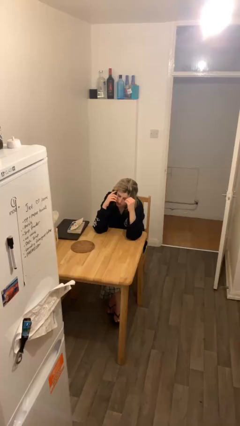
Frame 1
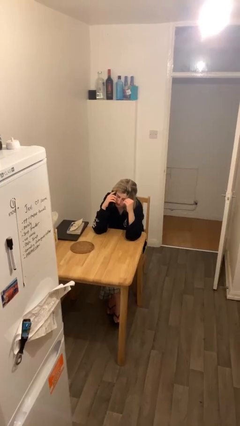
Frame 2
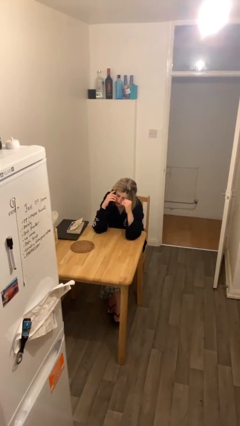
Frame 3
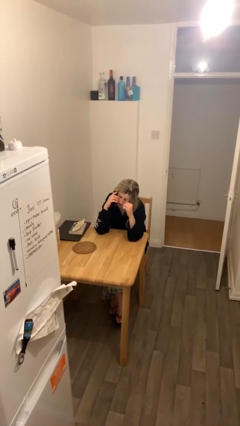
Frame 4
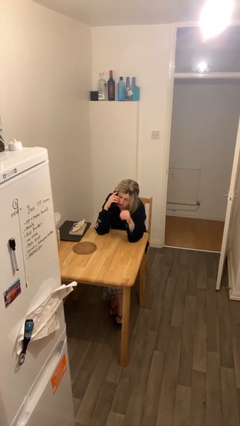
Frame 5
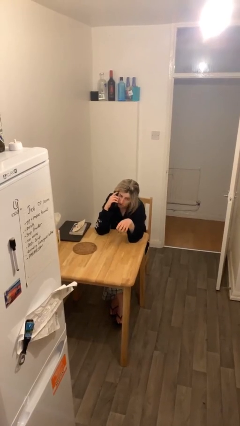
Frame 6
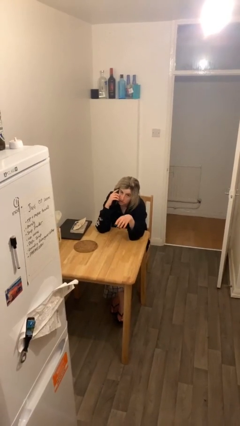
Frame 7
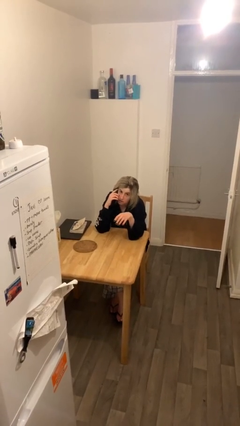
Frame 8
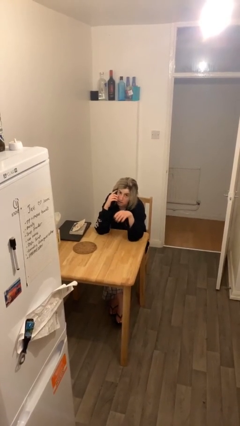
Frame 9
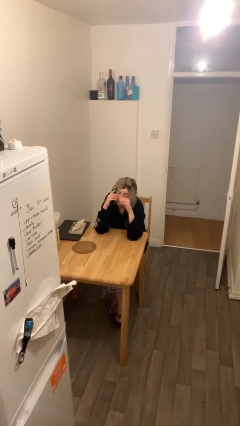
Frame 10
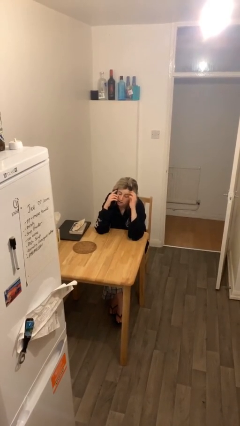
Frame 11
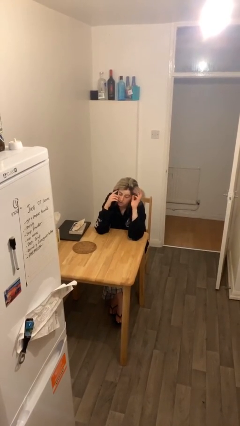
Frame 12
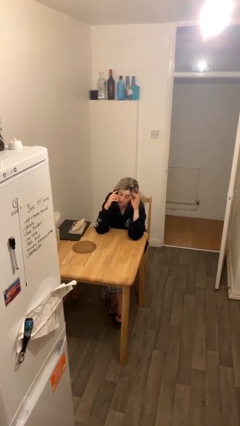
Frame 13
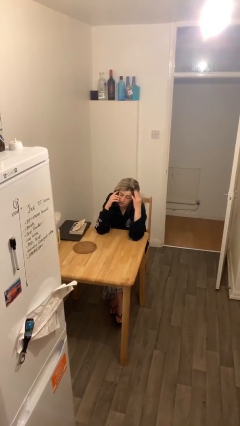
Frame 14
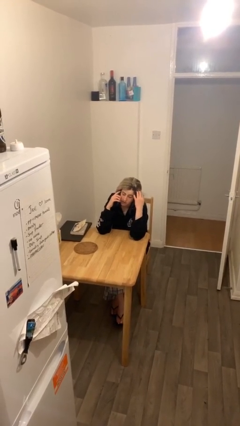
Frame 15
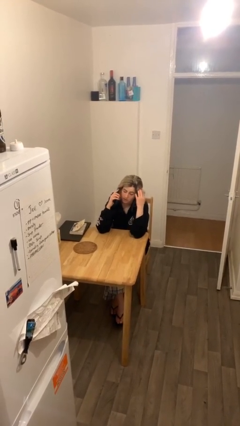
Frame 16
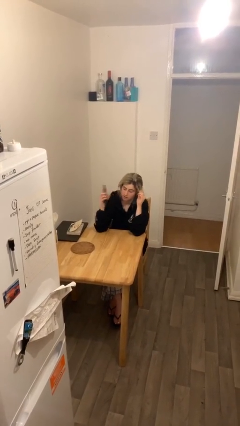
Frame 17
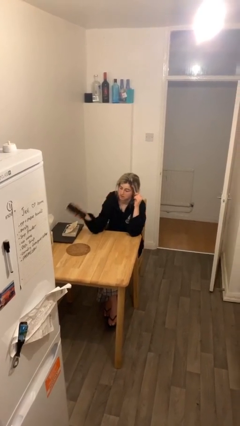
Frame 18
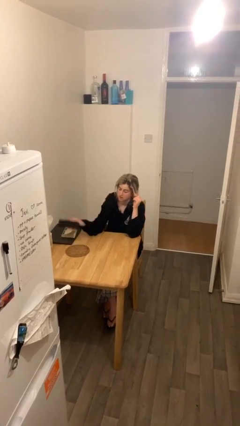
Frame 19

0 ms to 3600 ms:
person talks on phone

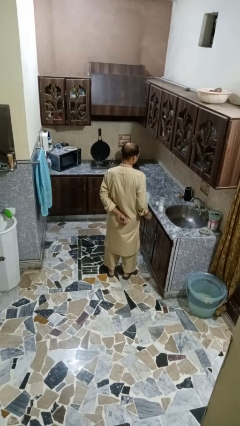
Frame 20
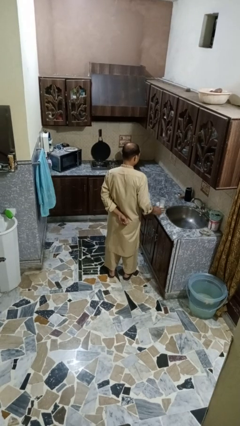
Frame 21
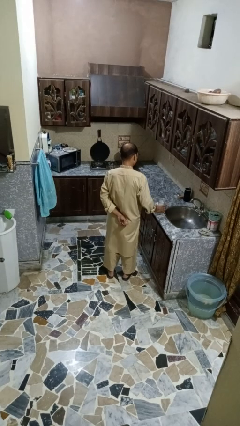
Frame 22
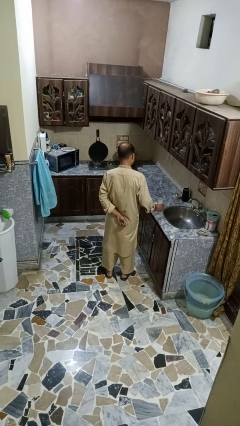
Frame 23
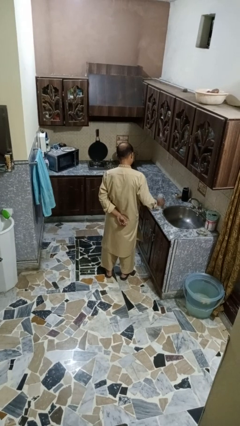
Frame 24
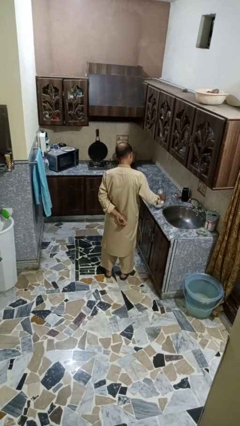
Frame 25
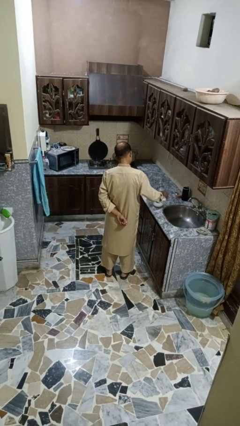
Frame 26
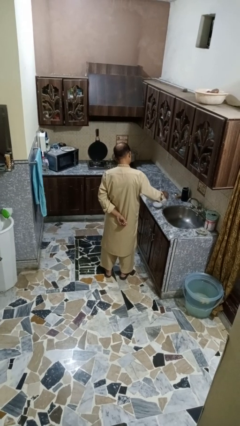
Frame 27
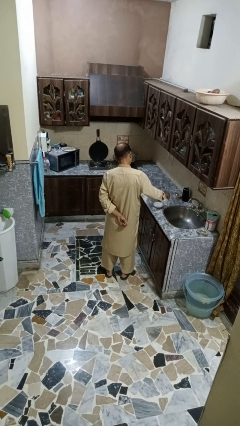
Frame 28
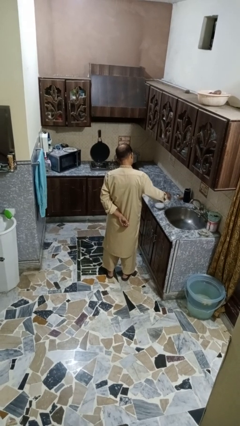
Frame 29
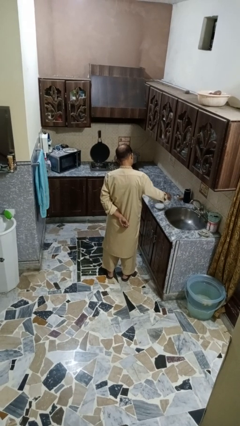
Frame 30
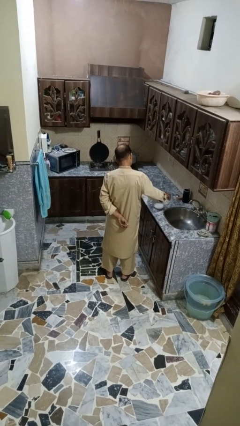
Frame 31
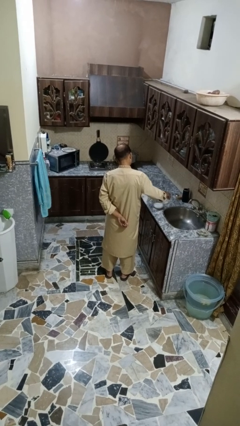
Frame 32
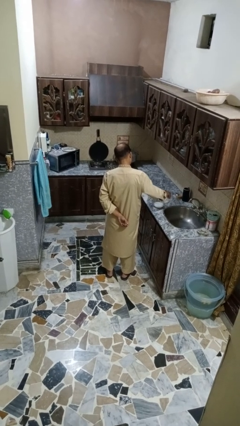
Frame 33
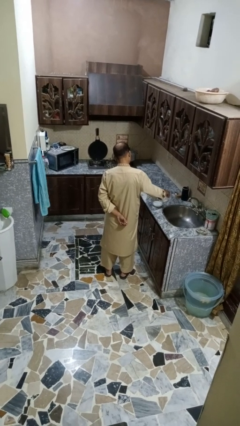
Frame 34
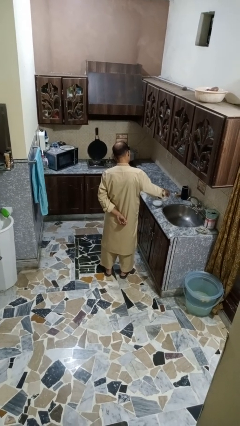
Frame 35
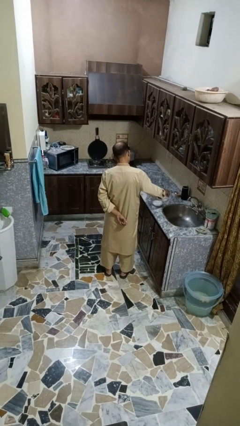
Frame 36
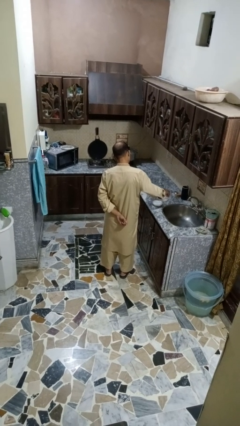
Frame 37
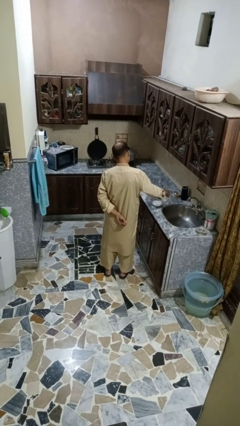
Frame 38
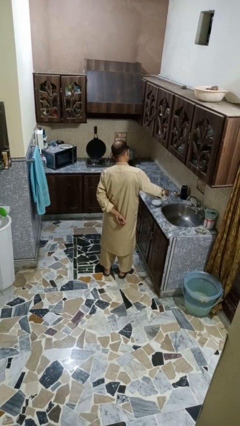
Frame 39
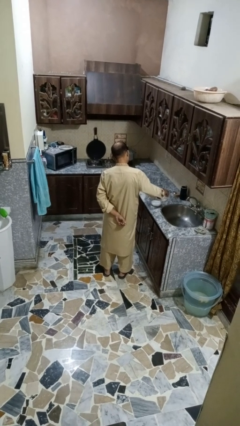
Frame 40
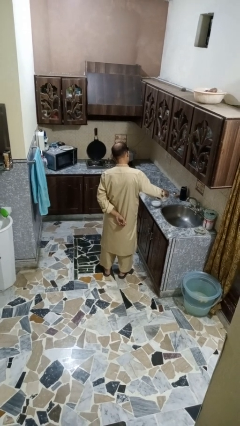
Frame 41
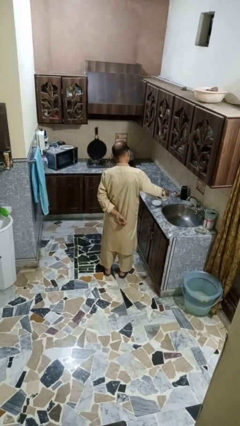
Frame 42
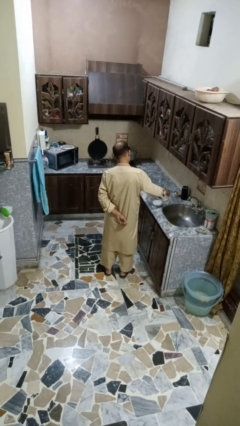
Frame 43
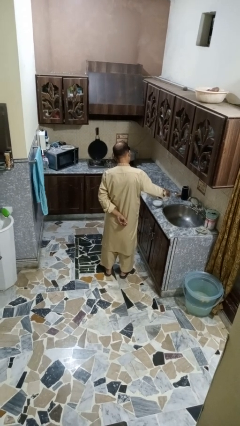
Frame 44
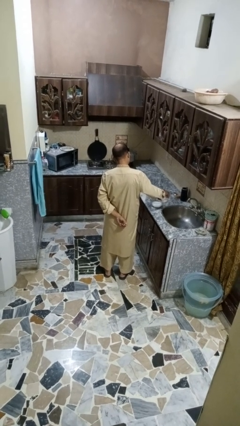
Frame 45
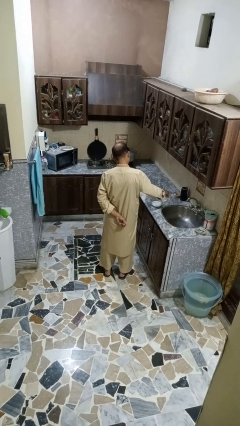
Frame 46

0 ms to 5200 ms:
person pours into bowl

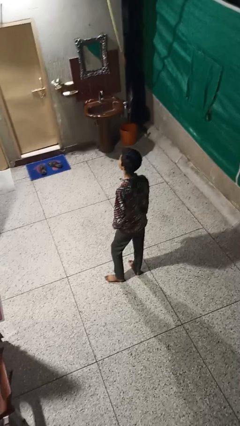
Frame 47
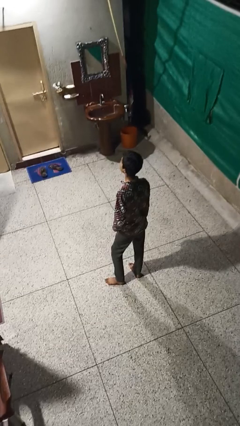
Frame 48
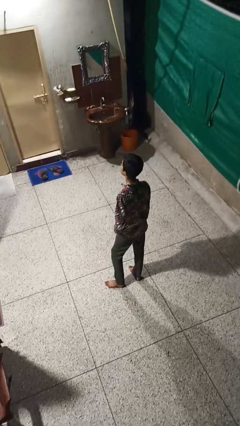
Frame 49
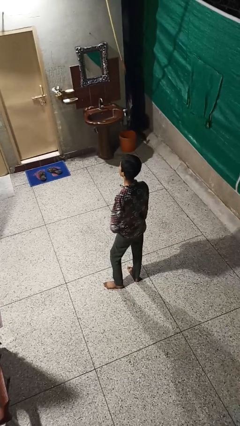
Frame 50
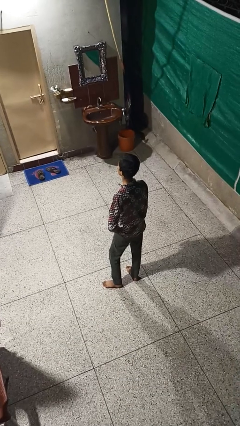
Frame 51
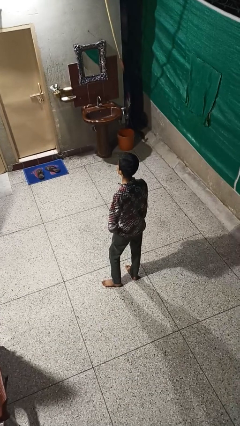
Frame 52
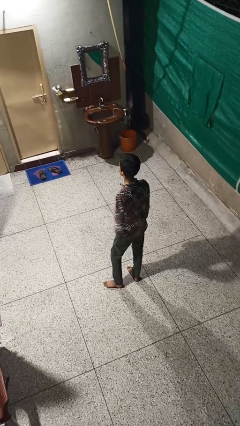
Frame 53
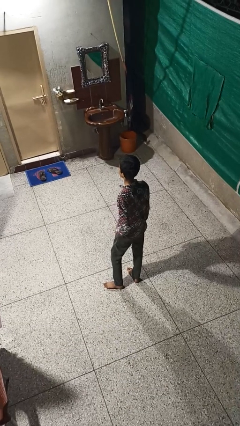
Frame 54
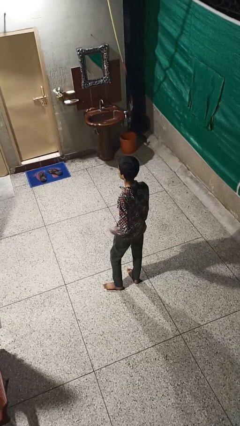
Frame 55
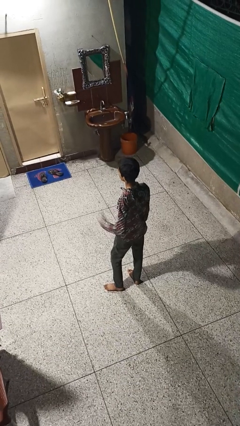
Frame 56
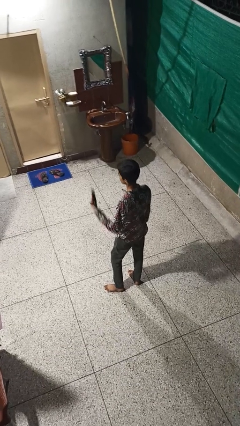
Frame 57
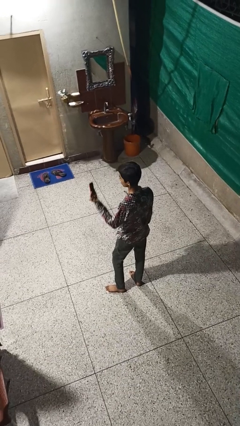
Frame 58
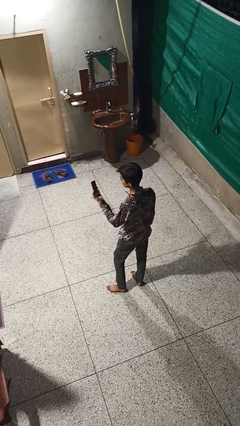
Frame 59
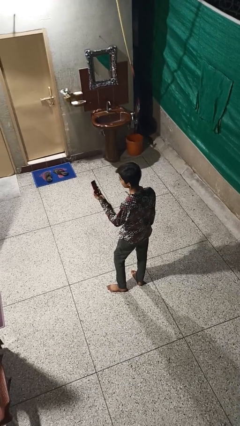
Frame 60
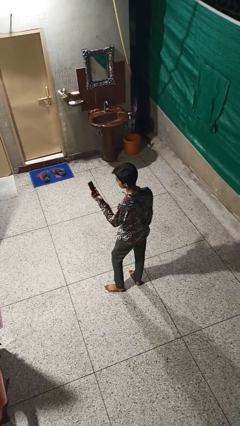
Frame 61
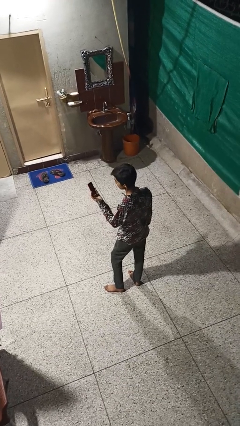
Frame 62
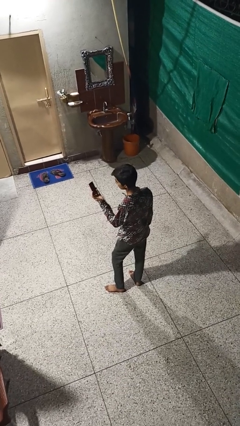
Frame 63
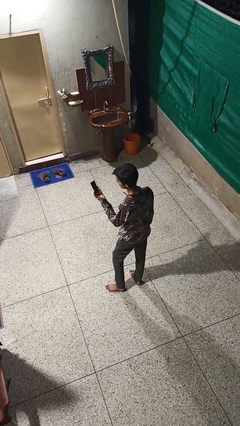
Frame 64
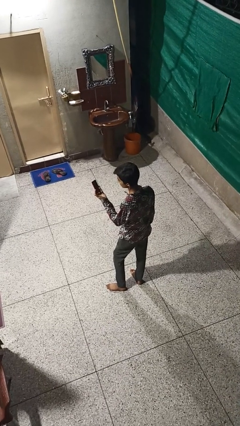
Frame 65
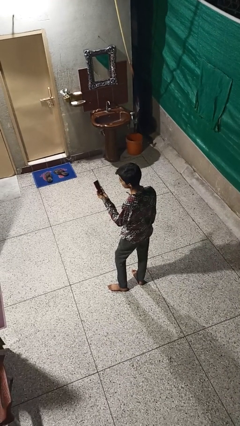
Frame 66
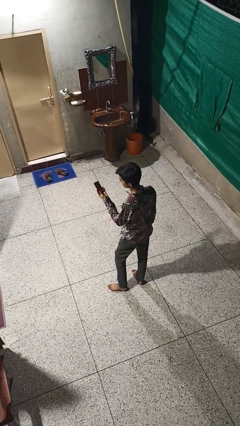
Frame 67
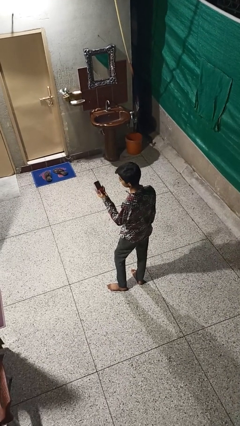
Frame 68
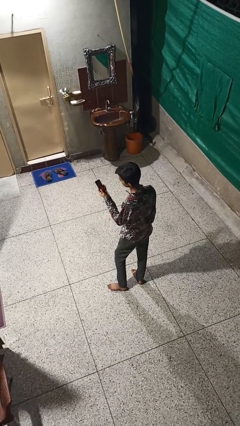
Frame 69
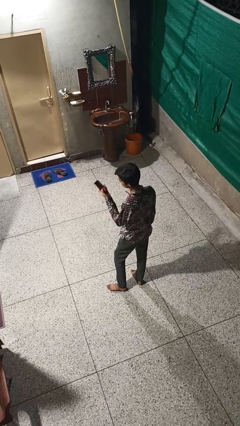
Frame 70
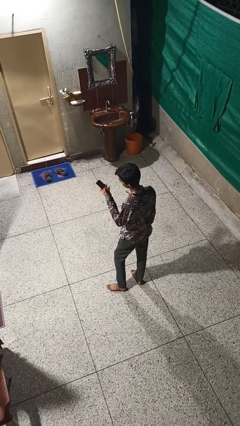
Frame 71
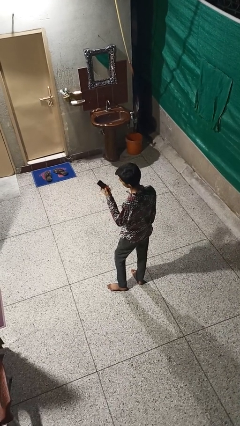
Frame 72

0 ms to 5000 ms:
person takes phone from pocket

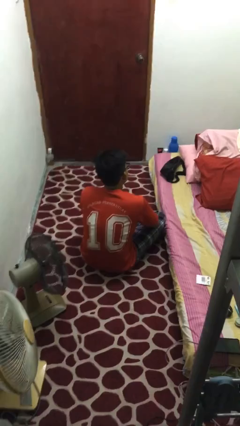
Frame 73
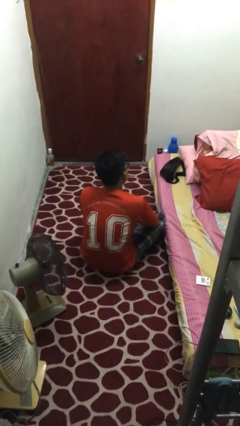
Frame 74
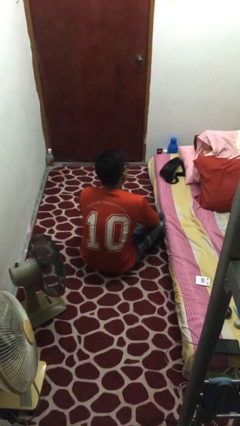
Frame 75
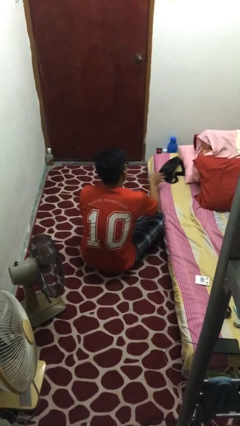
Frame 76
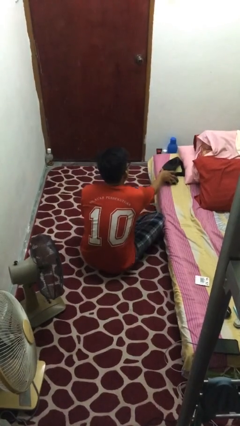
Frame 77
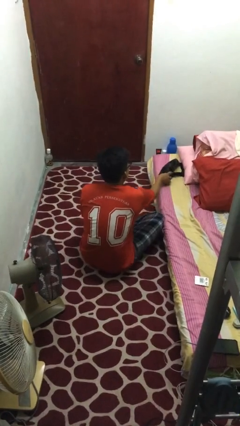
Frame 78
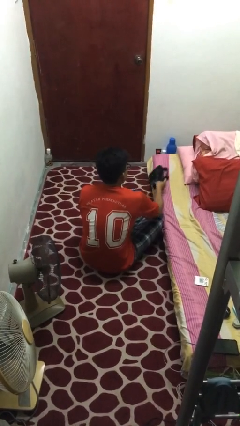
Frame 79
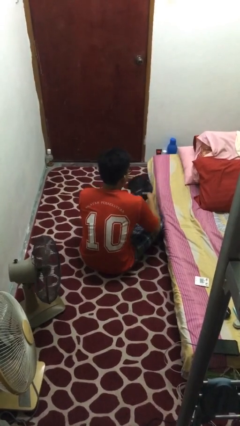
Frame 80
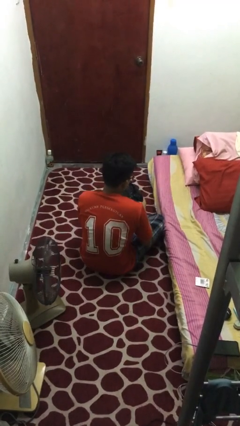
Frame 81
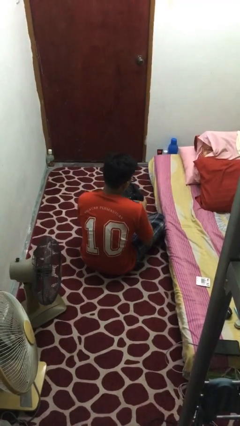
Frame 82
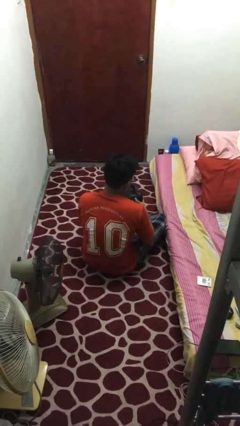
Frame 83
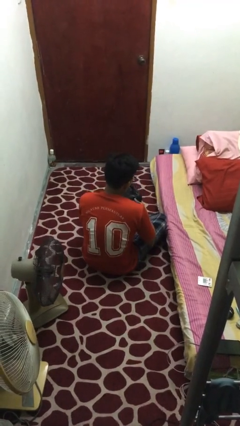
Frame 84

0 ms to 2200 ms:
person picks up object from bed

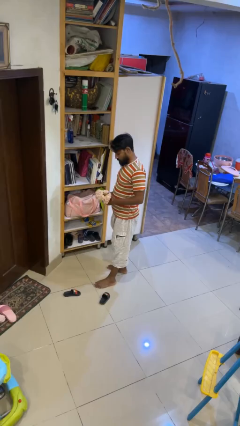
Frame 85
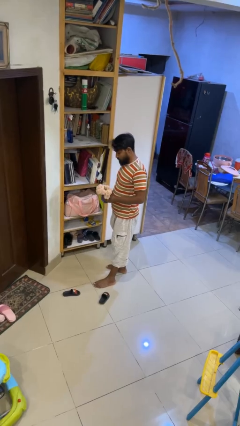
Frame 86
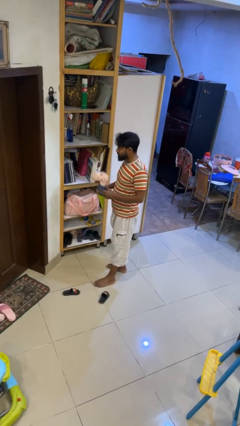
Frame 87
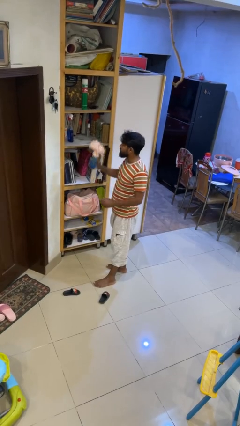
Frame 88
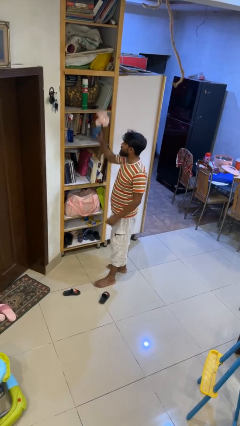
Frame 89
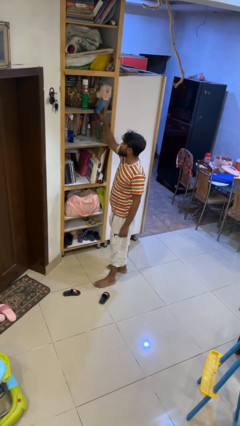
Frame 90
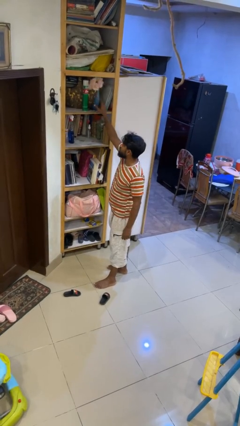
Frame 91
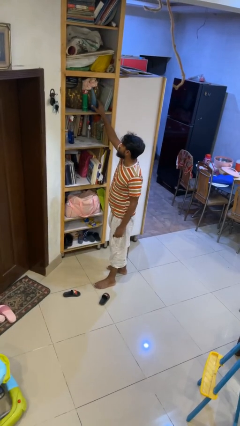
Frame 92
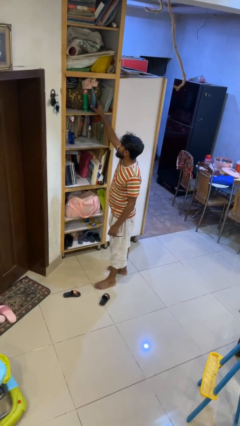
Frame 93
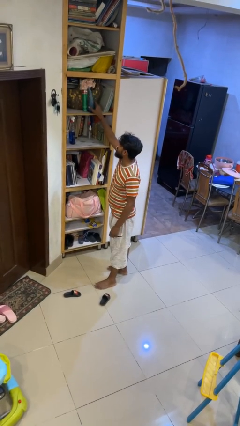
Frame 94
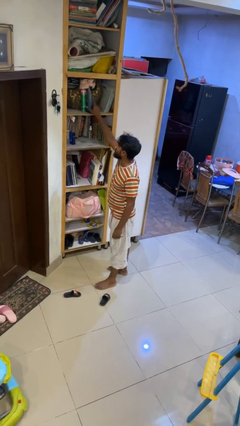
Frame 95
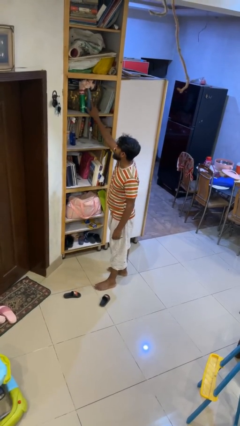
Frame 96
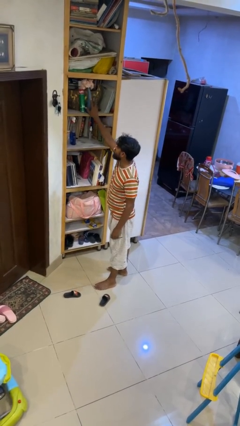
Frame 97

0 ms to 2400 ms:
person puts down object on shelf
